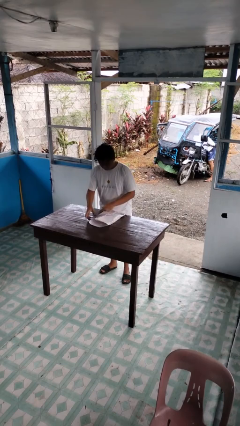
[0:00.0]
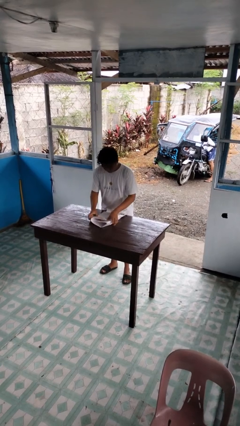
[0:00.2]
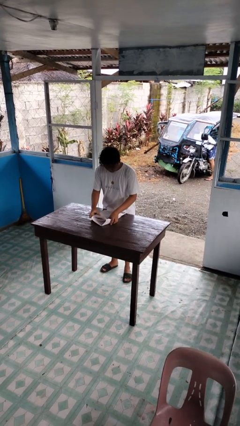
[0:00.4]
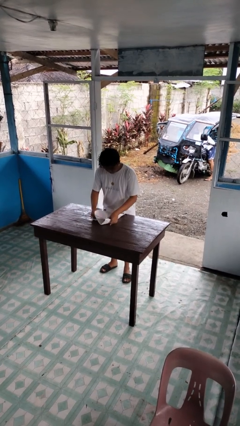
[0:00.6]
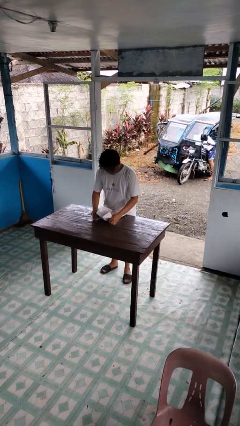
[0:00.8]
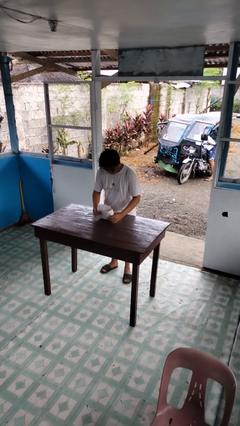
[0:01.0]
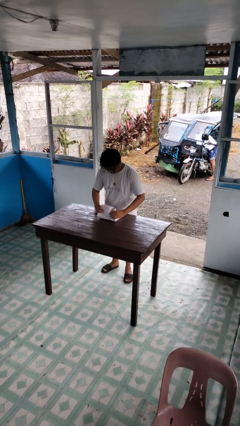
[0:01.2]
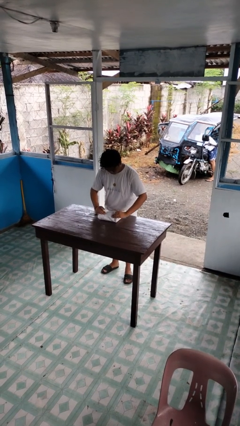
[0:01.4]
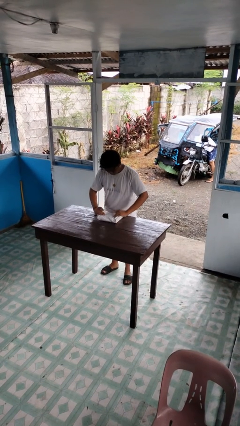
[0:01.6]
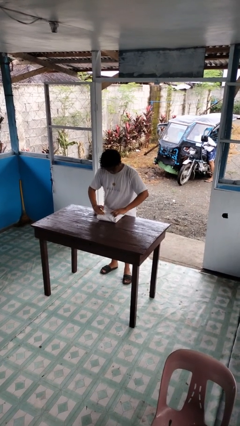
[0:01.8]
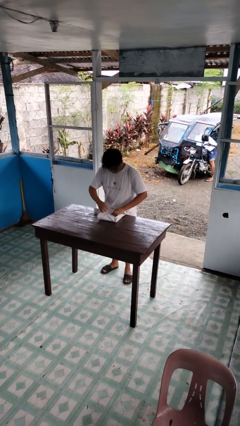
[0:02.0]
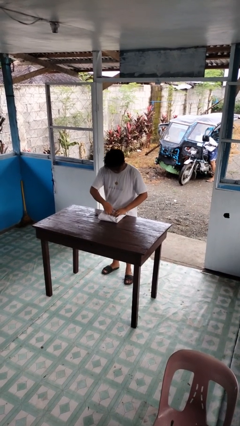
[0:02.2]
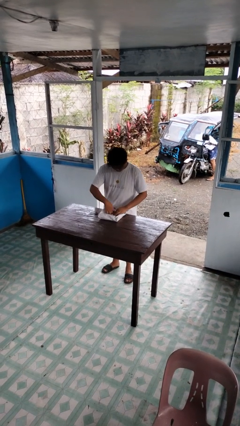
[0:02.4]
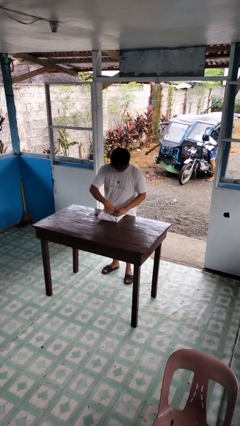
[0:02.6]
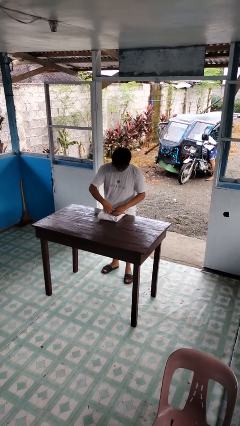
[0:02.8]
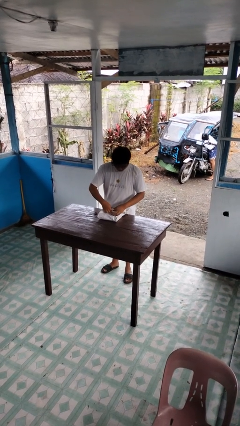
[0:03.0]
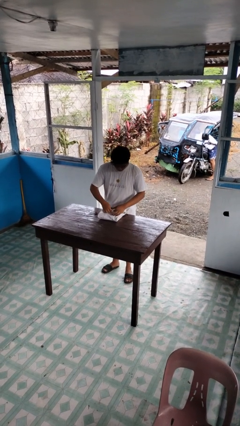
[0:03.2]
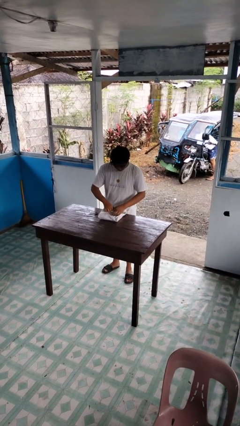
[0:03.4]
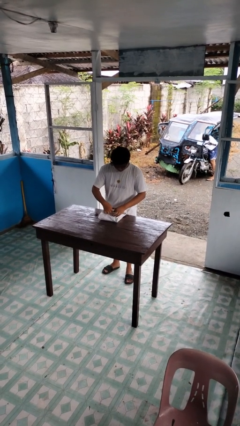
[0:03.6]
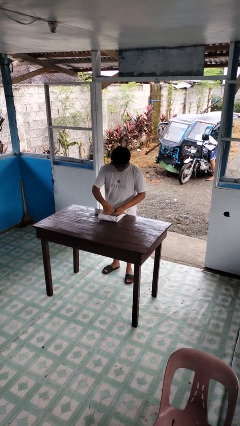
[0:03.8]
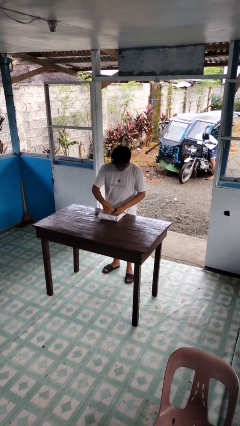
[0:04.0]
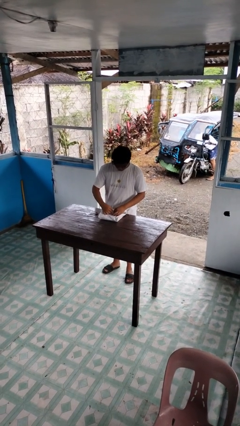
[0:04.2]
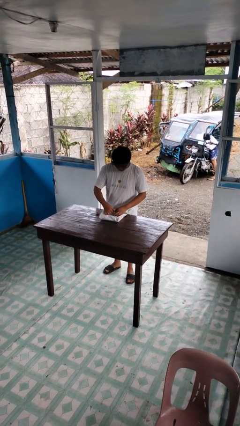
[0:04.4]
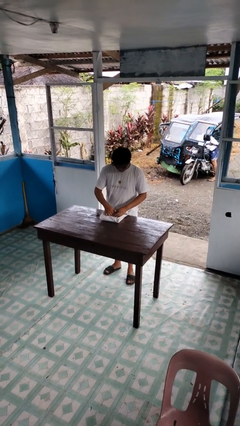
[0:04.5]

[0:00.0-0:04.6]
person wraps box

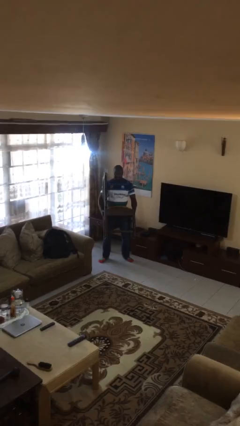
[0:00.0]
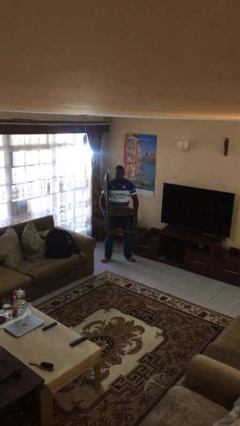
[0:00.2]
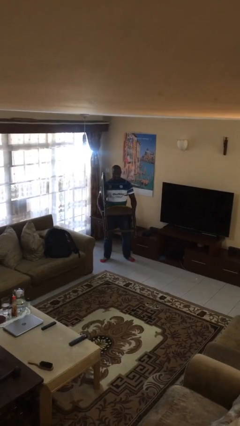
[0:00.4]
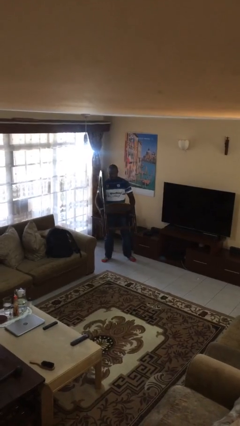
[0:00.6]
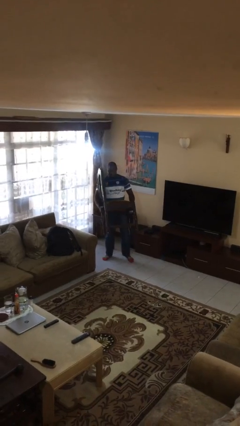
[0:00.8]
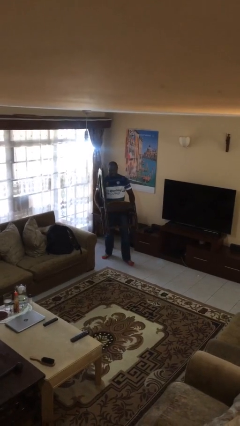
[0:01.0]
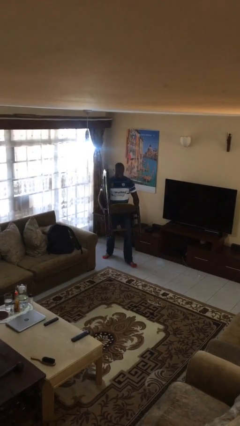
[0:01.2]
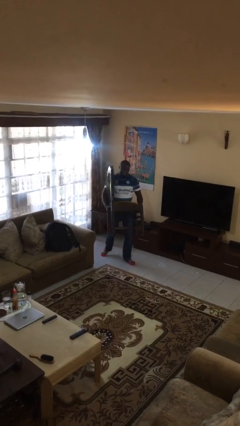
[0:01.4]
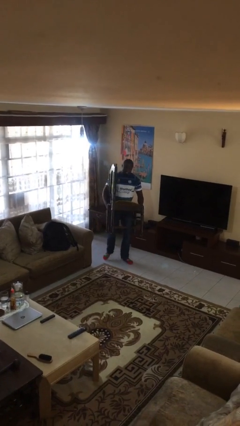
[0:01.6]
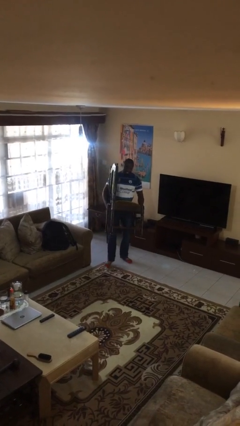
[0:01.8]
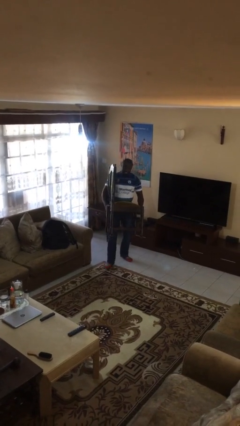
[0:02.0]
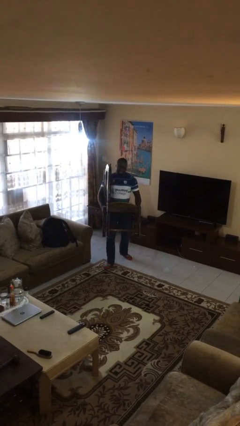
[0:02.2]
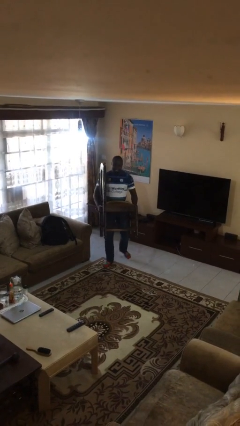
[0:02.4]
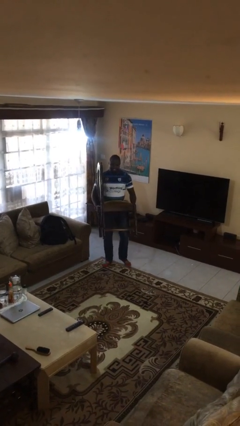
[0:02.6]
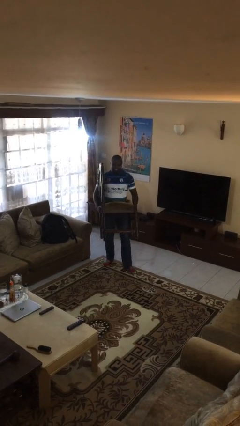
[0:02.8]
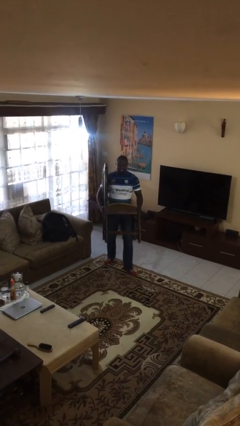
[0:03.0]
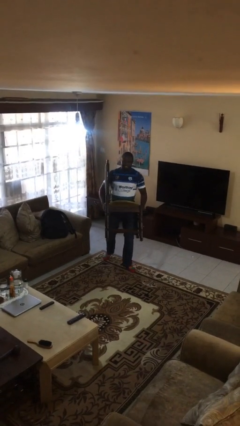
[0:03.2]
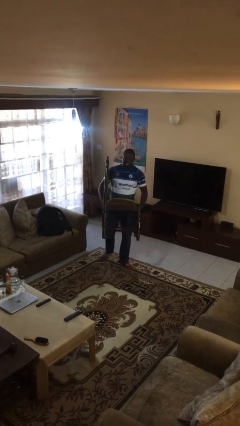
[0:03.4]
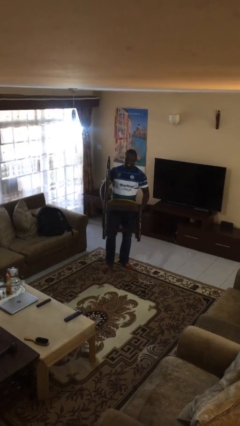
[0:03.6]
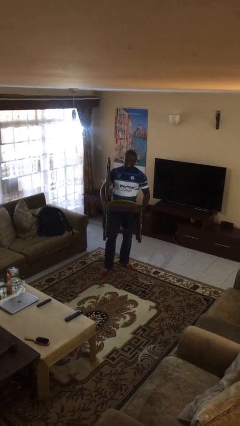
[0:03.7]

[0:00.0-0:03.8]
person carries heavy object

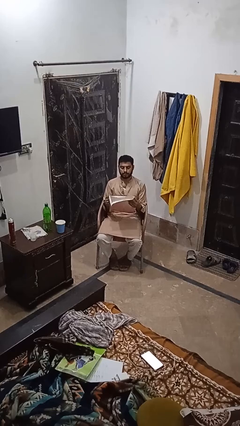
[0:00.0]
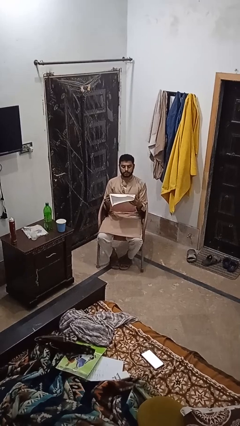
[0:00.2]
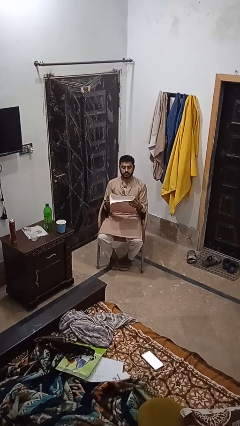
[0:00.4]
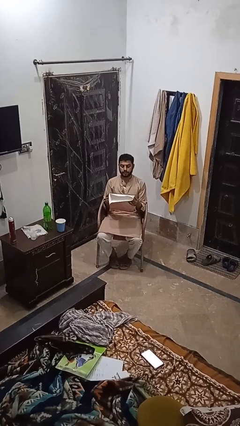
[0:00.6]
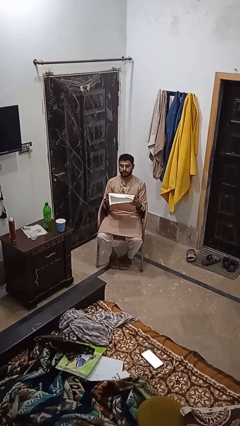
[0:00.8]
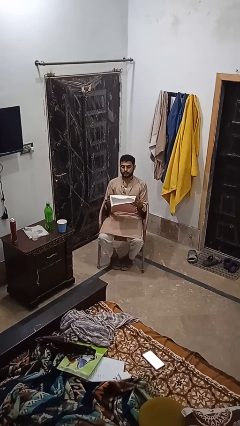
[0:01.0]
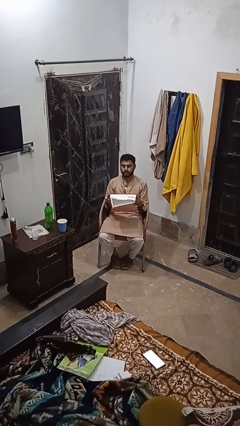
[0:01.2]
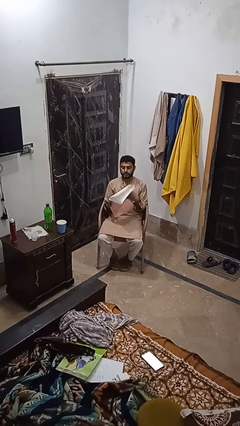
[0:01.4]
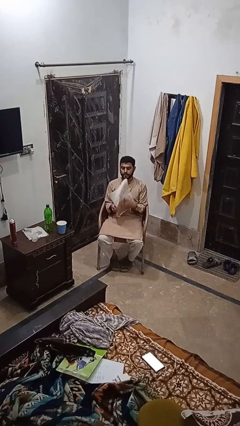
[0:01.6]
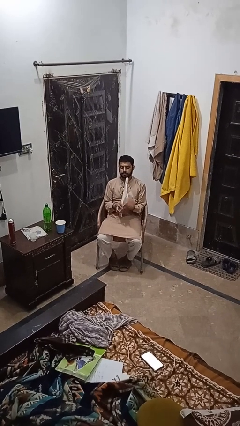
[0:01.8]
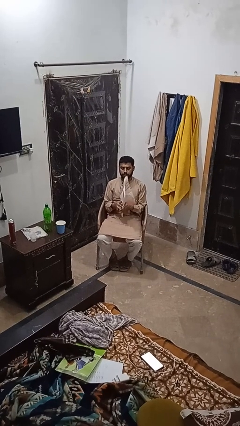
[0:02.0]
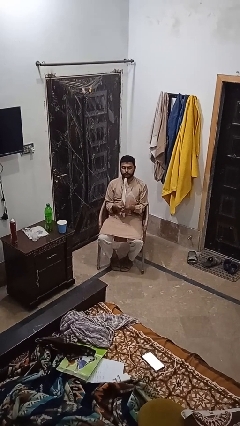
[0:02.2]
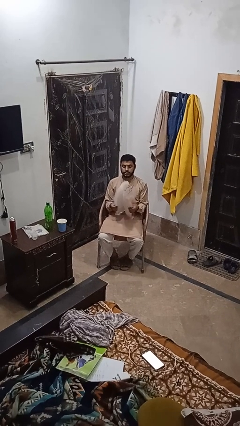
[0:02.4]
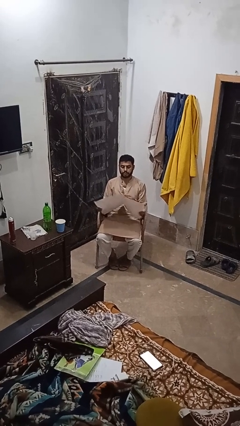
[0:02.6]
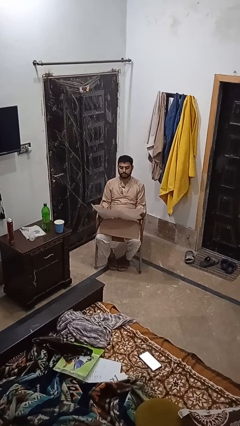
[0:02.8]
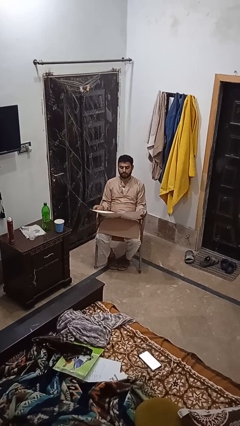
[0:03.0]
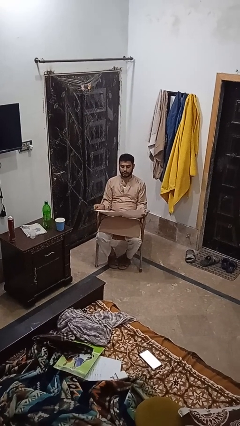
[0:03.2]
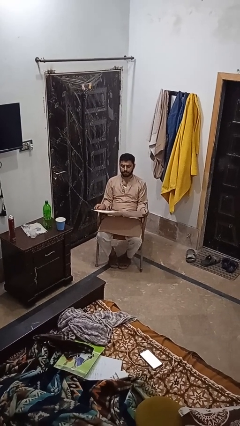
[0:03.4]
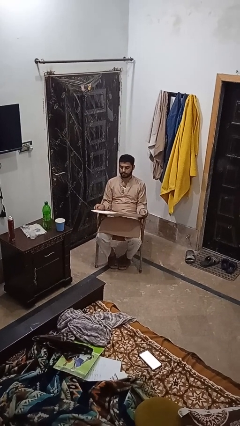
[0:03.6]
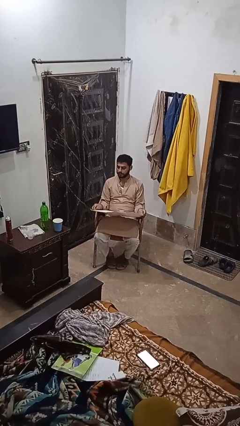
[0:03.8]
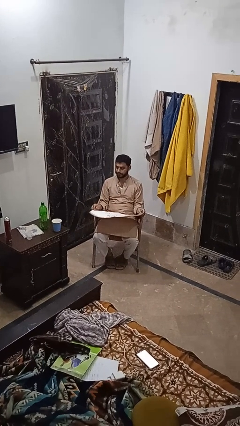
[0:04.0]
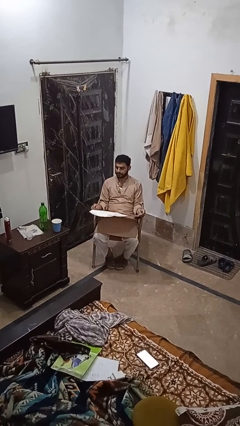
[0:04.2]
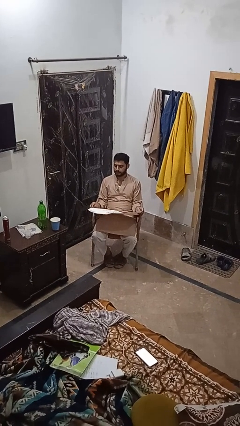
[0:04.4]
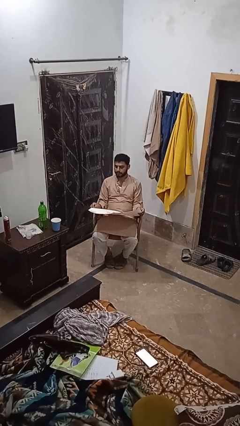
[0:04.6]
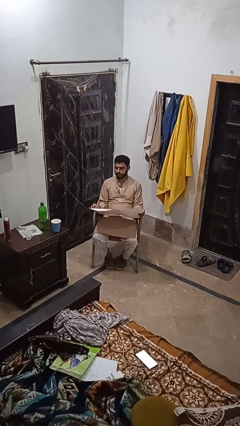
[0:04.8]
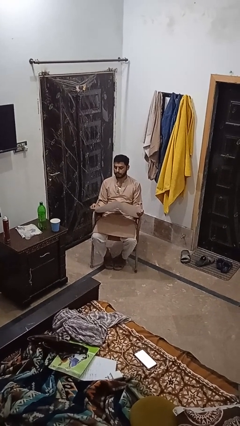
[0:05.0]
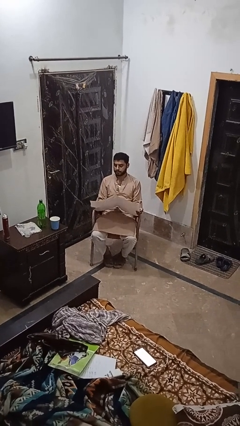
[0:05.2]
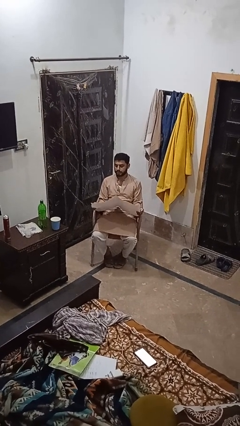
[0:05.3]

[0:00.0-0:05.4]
person reads newspaper

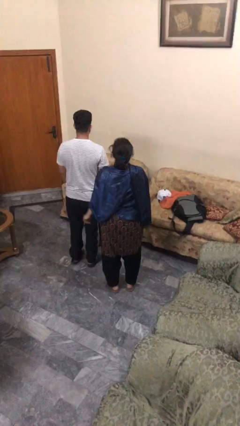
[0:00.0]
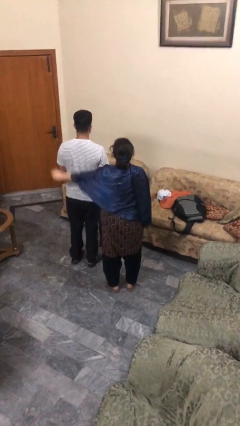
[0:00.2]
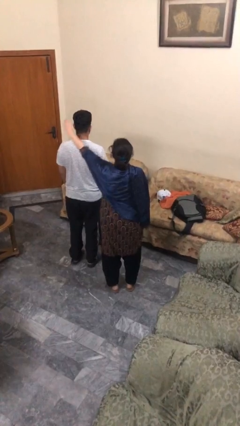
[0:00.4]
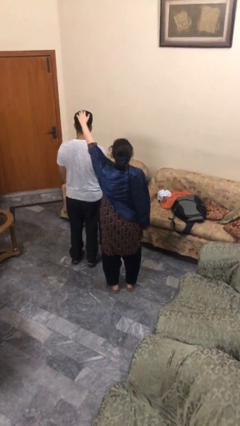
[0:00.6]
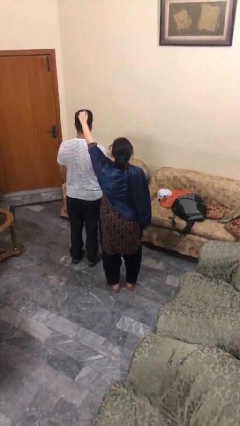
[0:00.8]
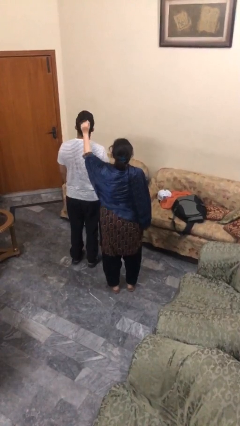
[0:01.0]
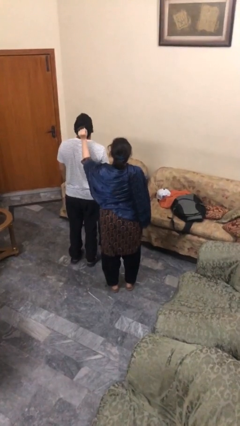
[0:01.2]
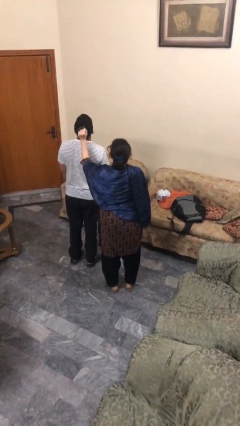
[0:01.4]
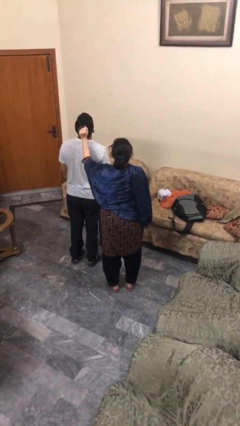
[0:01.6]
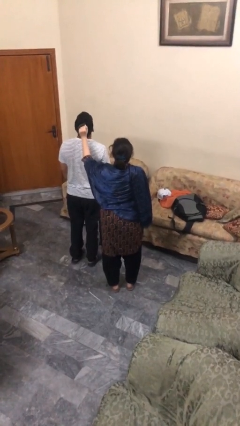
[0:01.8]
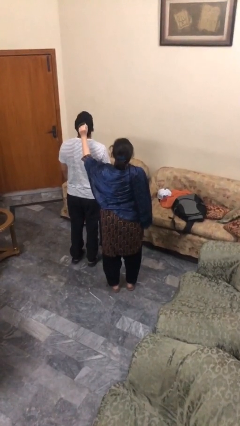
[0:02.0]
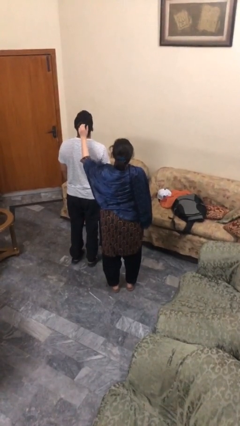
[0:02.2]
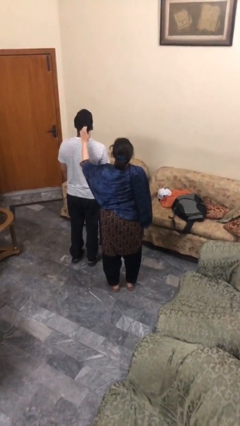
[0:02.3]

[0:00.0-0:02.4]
person grabs person by hair

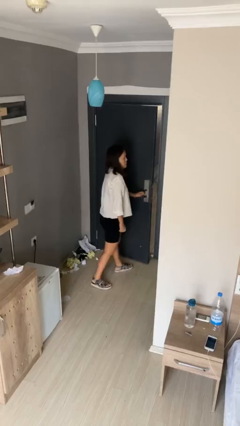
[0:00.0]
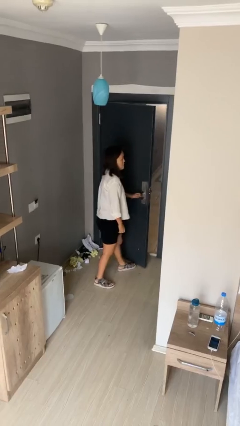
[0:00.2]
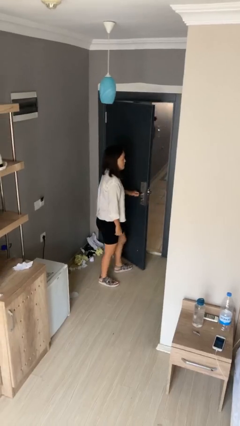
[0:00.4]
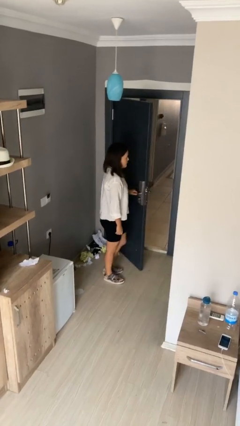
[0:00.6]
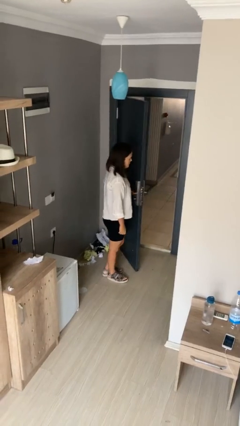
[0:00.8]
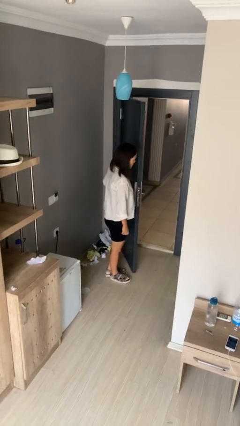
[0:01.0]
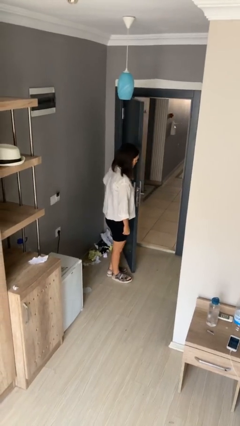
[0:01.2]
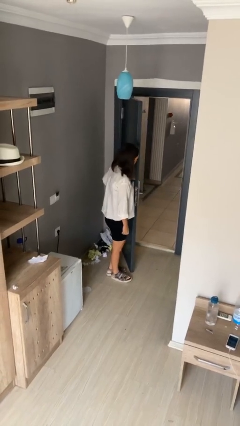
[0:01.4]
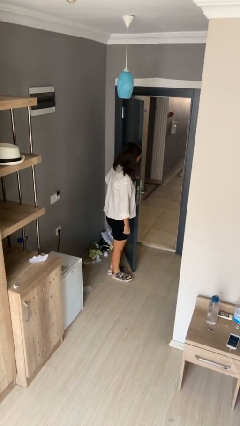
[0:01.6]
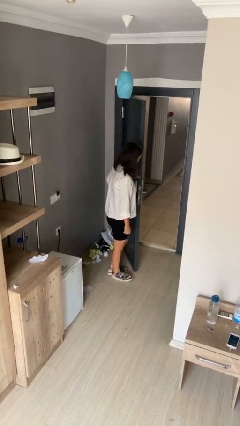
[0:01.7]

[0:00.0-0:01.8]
person opens facility door
